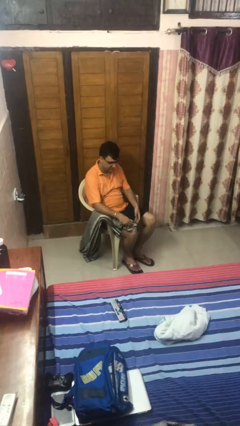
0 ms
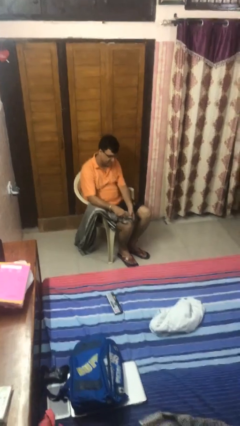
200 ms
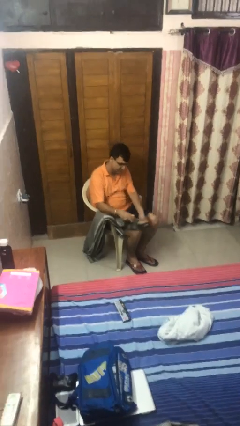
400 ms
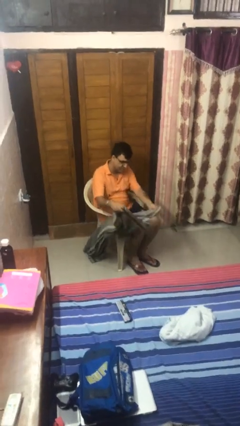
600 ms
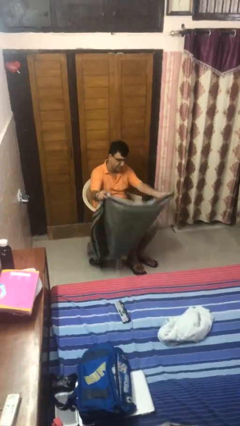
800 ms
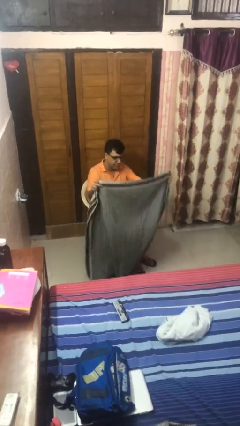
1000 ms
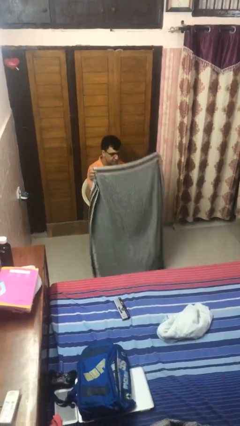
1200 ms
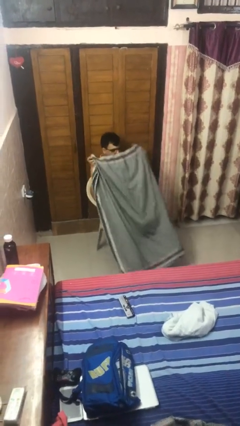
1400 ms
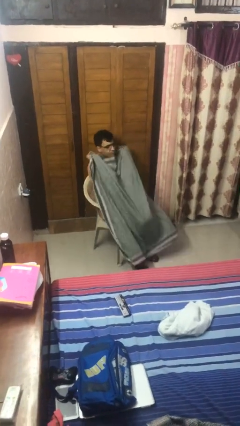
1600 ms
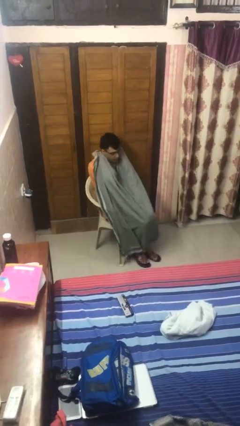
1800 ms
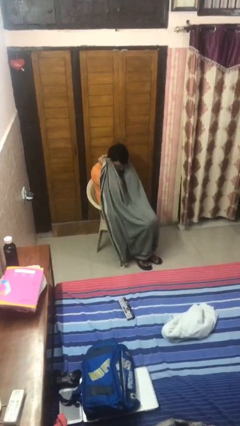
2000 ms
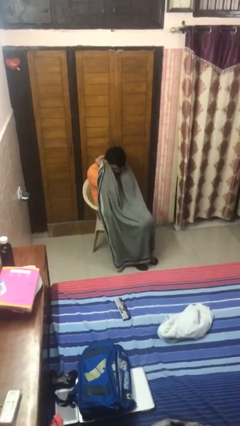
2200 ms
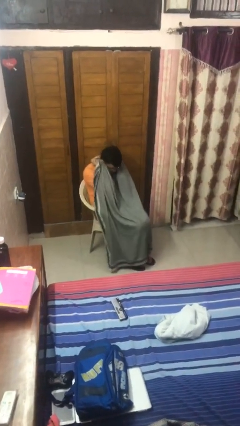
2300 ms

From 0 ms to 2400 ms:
person covers with blanket

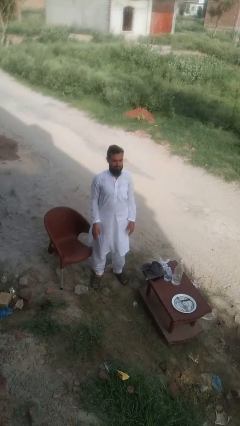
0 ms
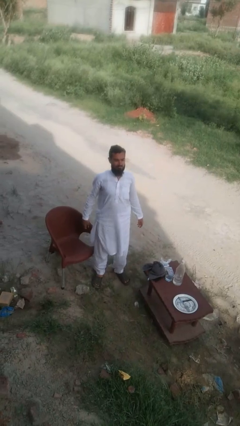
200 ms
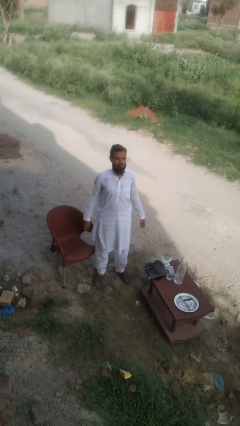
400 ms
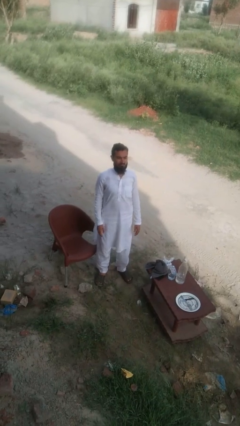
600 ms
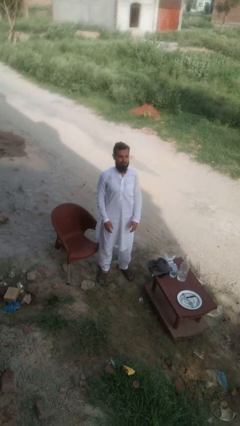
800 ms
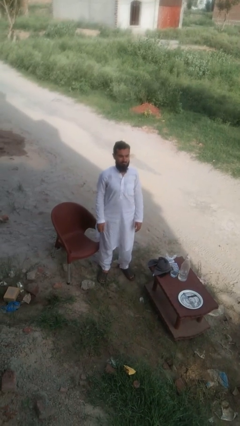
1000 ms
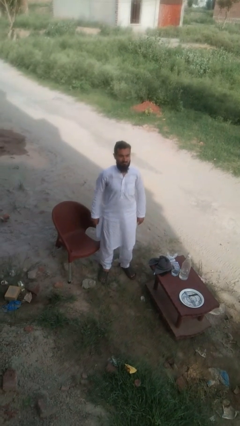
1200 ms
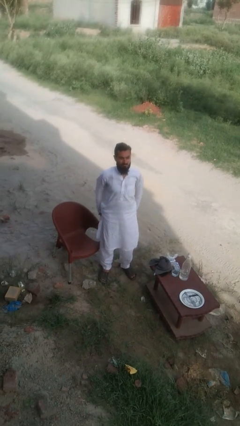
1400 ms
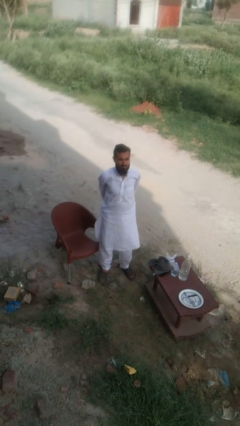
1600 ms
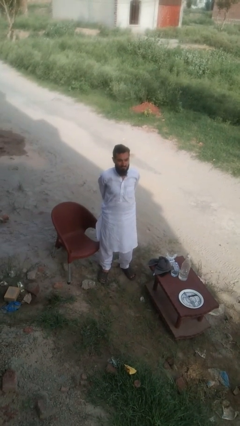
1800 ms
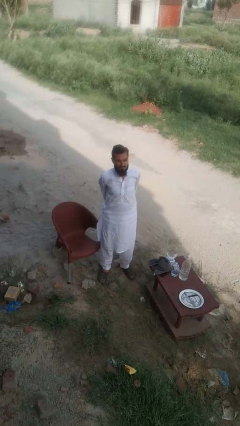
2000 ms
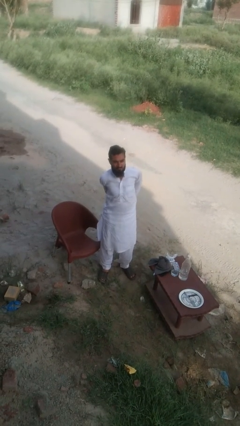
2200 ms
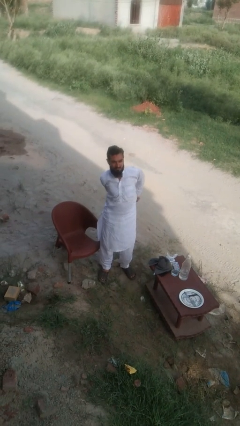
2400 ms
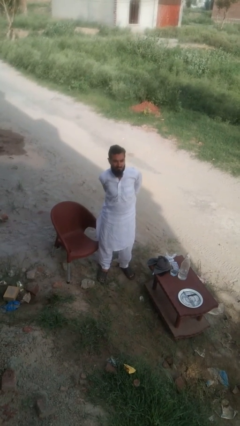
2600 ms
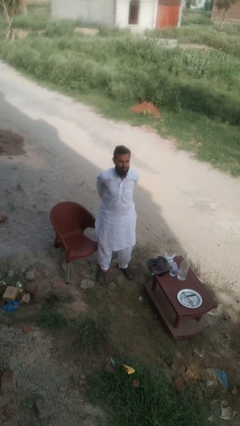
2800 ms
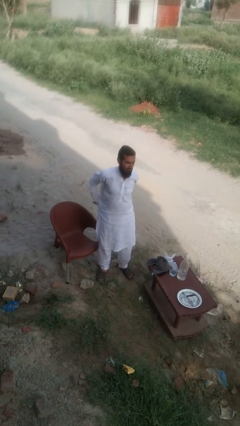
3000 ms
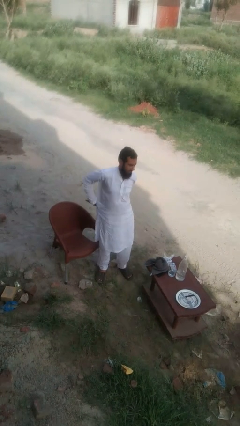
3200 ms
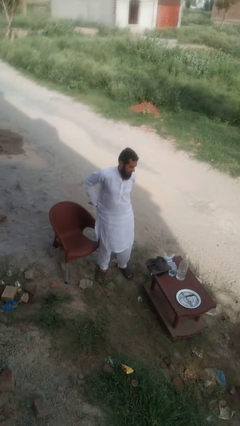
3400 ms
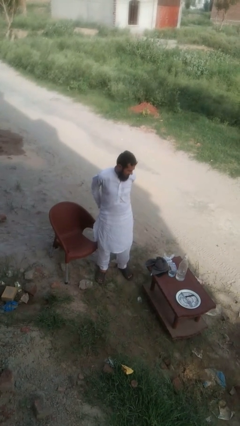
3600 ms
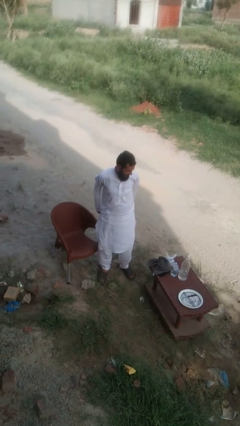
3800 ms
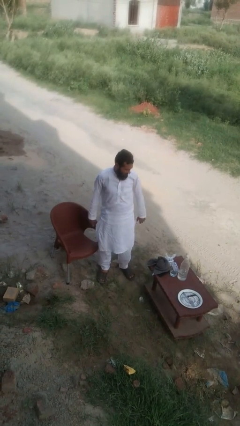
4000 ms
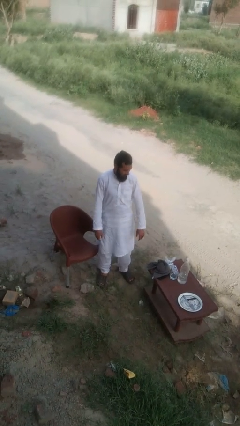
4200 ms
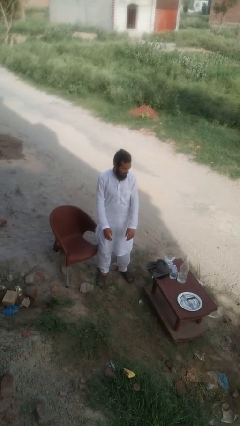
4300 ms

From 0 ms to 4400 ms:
person stretches back

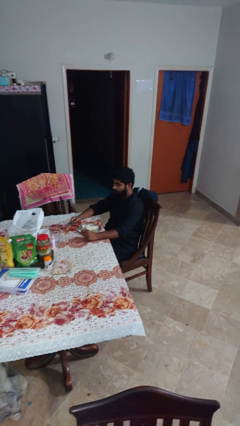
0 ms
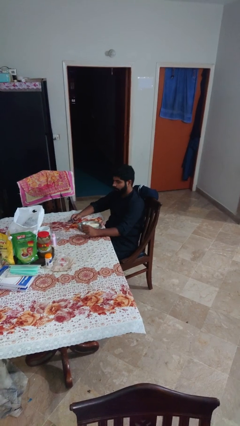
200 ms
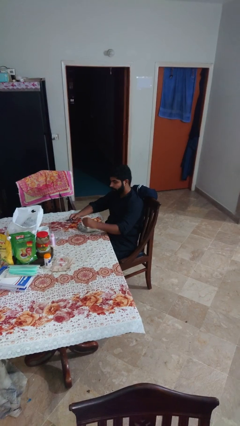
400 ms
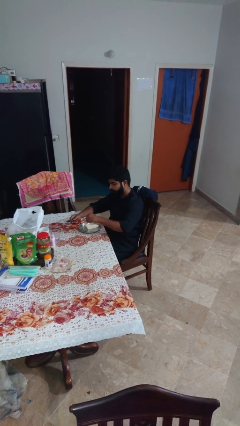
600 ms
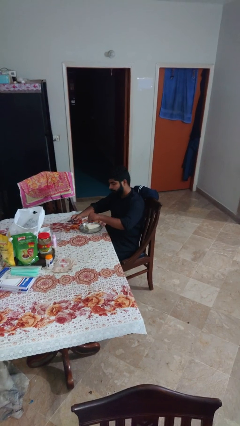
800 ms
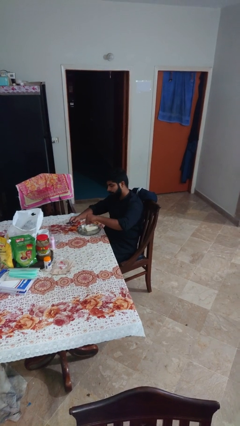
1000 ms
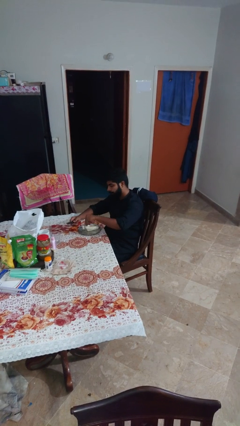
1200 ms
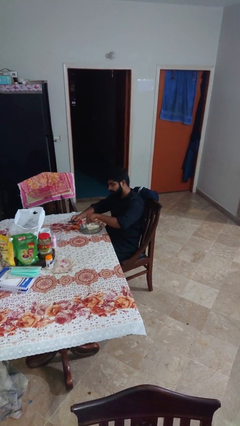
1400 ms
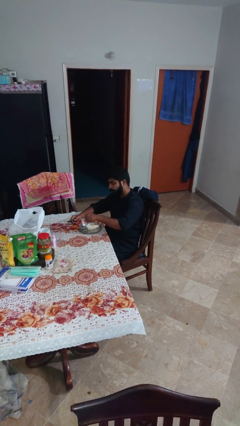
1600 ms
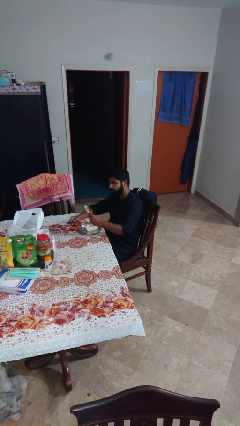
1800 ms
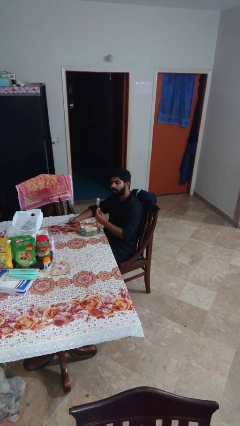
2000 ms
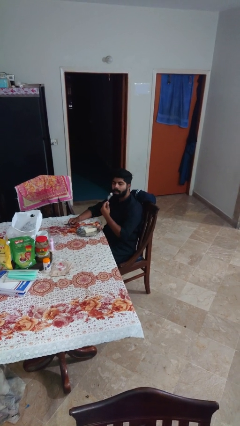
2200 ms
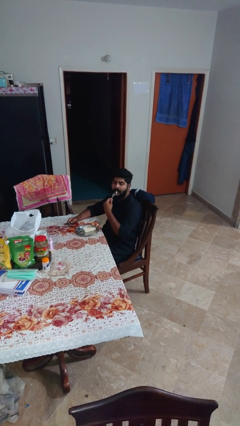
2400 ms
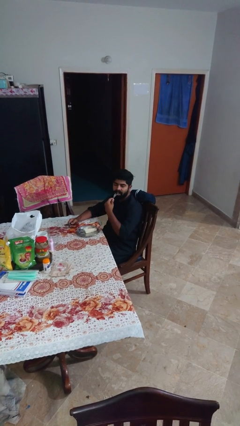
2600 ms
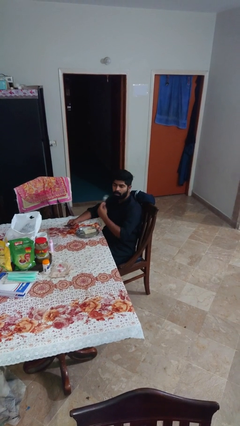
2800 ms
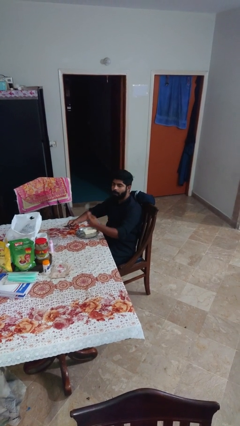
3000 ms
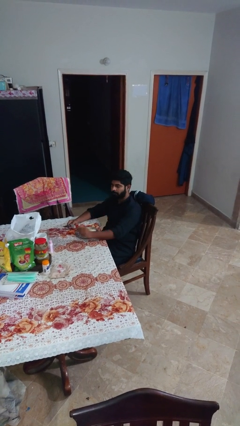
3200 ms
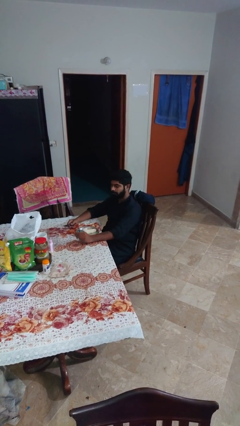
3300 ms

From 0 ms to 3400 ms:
person eats with utensil

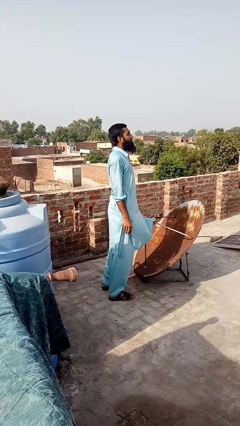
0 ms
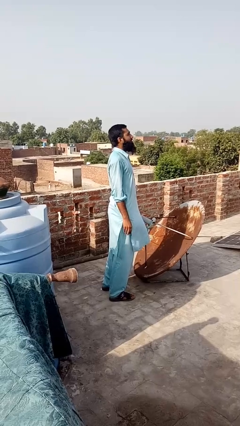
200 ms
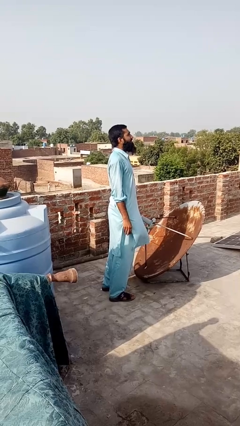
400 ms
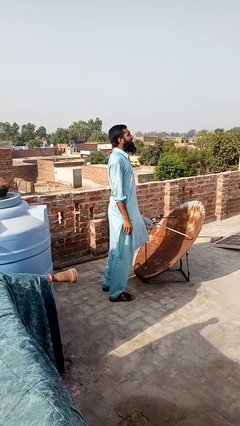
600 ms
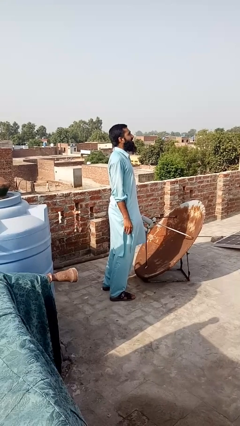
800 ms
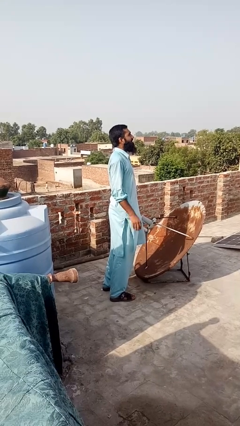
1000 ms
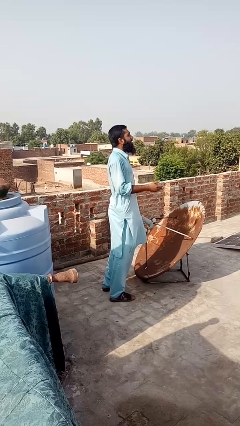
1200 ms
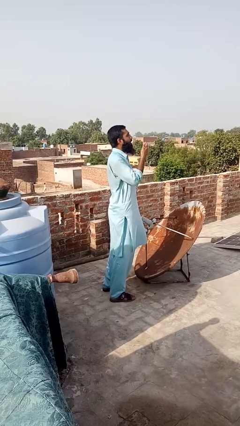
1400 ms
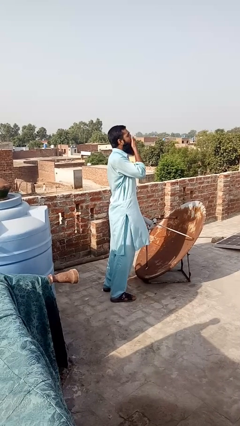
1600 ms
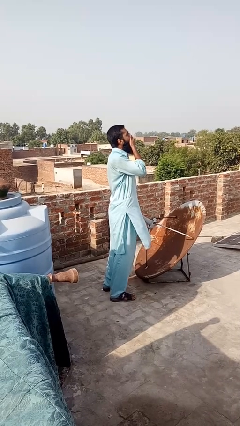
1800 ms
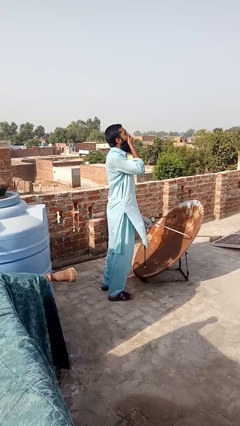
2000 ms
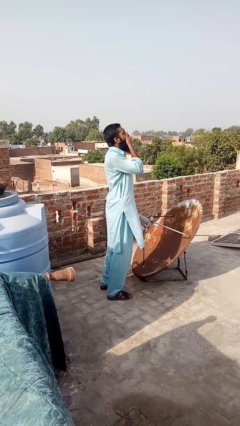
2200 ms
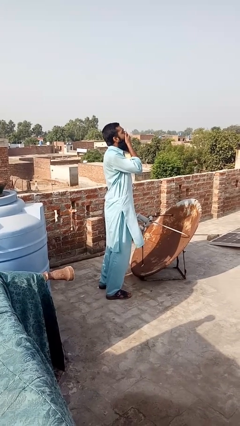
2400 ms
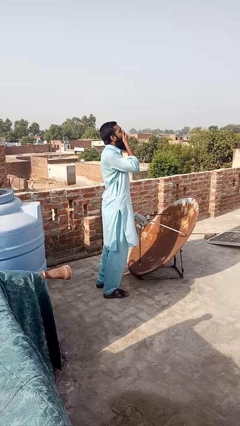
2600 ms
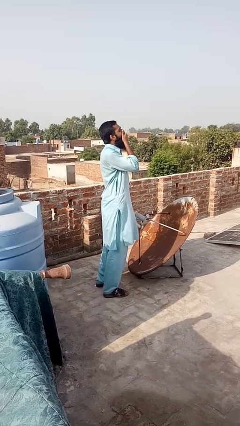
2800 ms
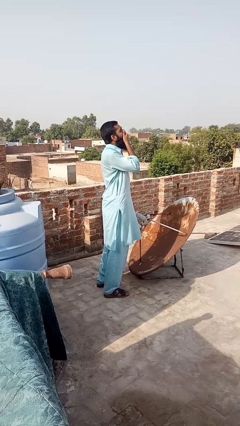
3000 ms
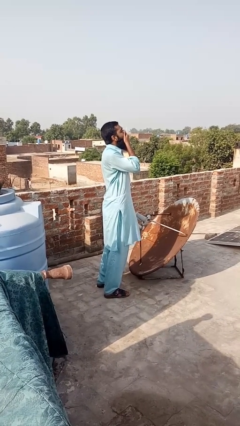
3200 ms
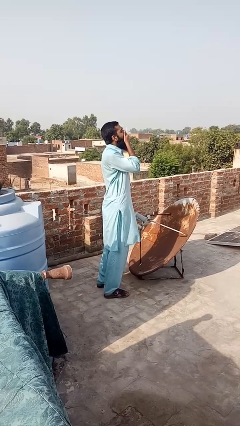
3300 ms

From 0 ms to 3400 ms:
person covers face with hands

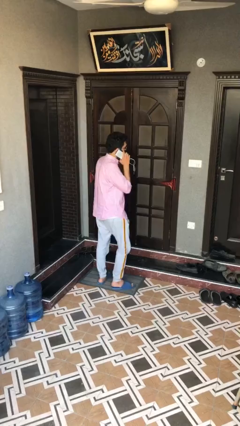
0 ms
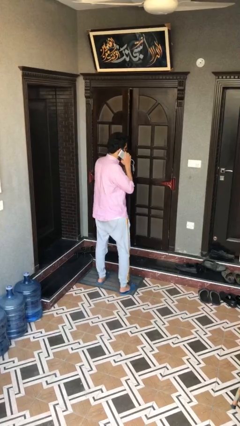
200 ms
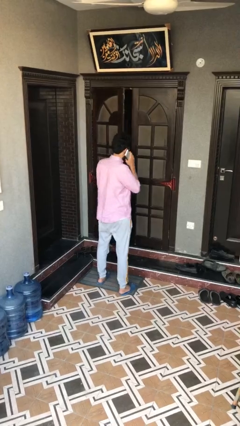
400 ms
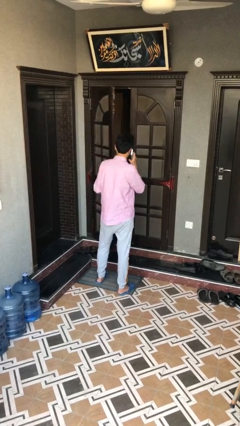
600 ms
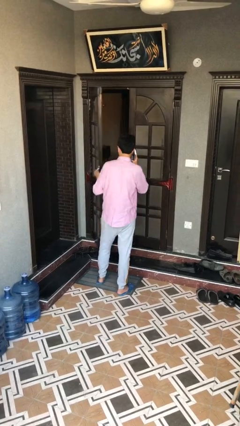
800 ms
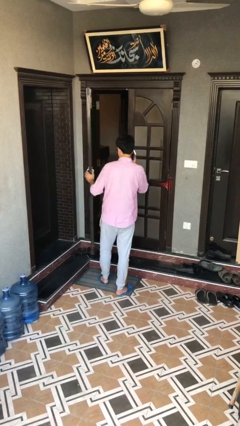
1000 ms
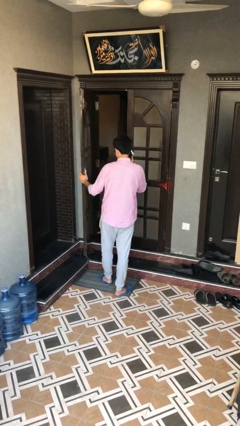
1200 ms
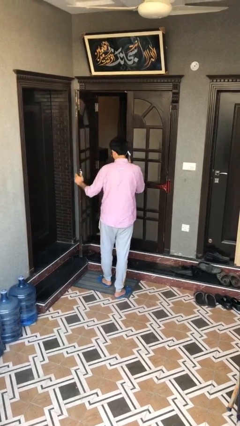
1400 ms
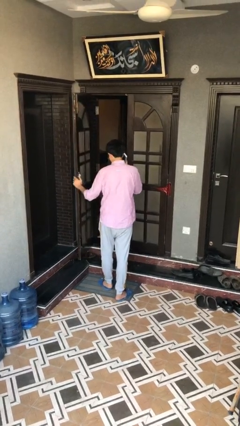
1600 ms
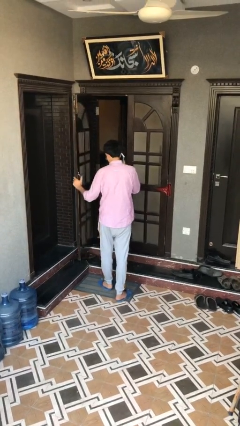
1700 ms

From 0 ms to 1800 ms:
person opens facility door

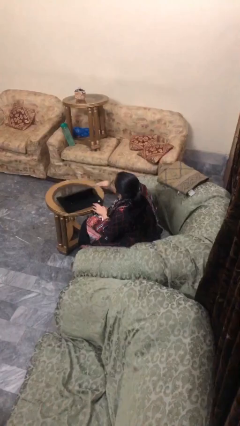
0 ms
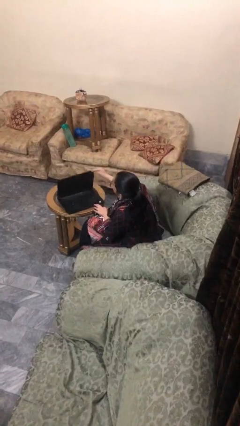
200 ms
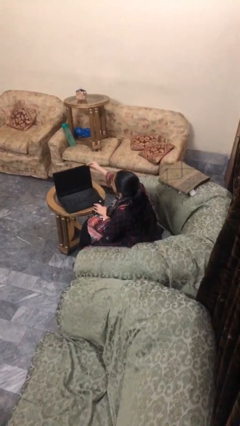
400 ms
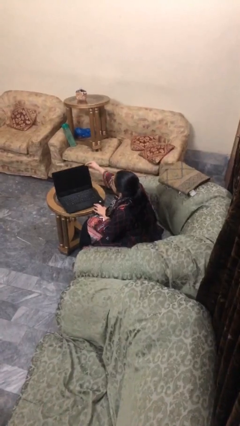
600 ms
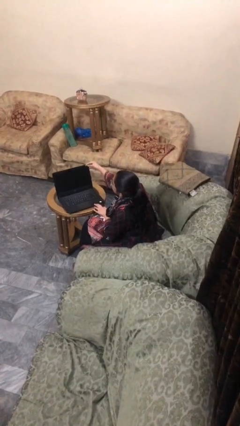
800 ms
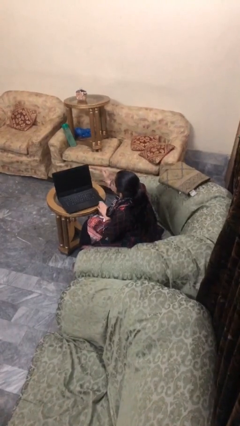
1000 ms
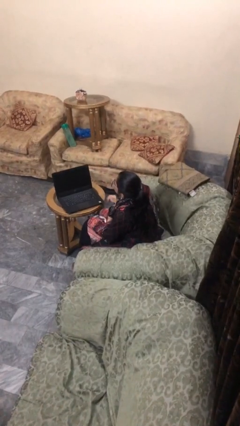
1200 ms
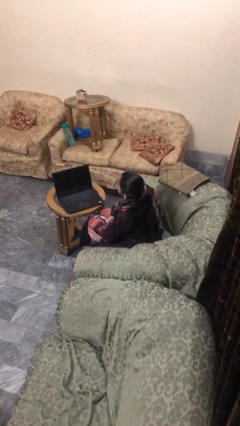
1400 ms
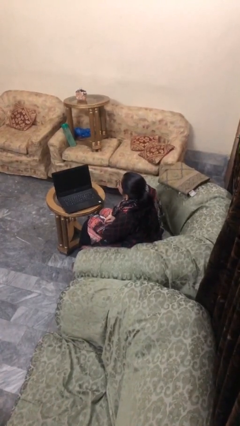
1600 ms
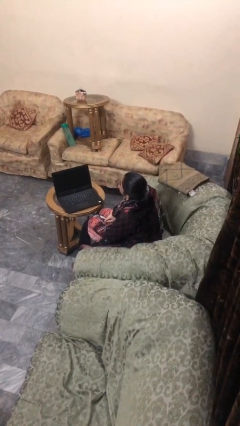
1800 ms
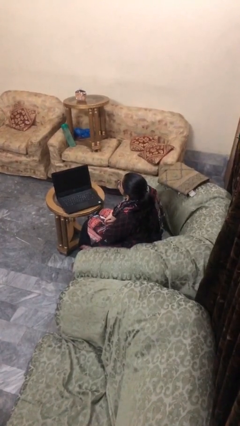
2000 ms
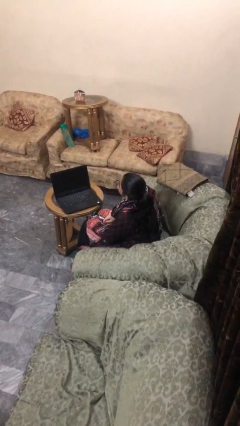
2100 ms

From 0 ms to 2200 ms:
person opens laptop
